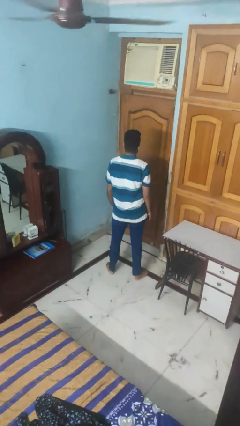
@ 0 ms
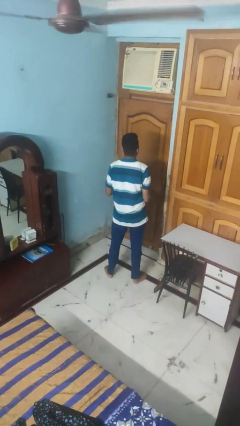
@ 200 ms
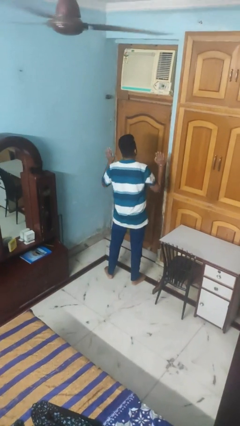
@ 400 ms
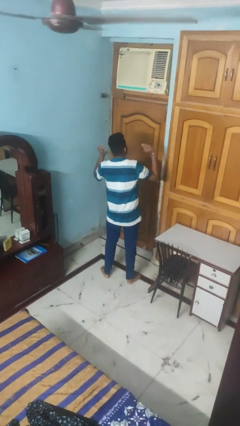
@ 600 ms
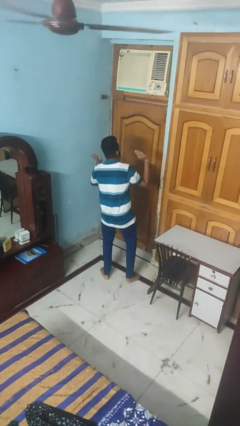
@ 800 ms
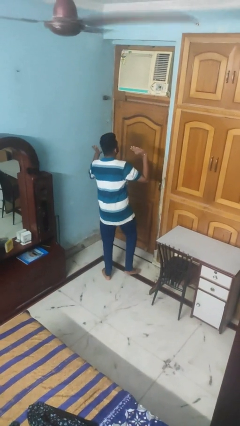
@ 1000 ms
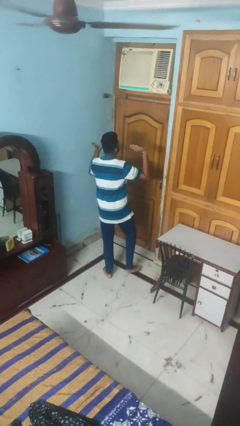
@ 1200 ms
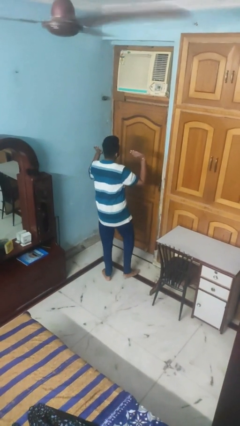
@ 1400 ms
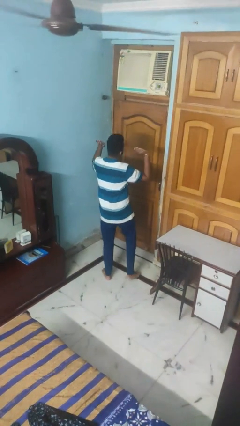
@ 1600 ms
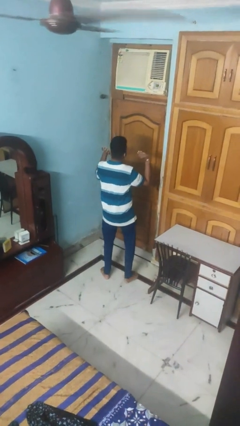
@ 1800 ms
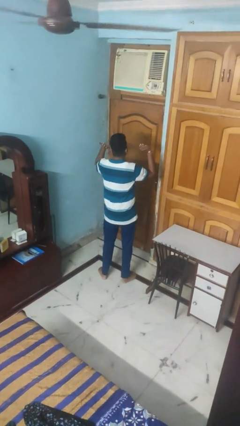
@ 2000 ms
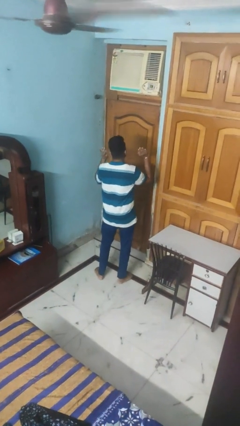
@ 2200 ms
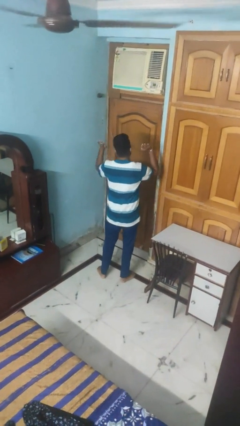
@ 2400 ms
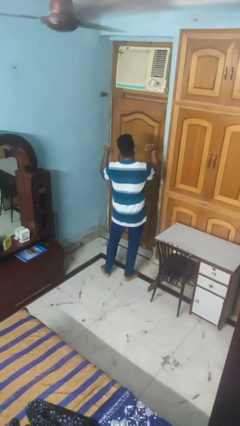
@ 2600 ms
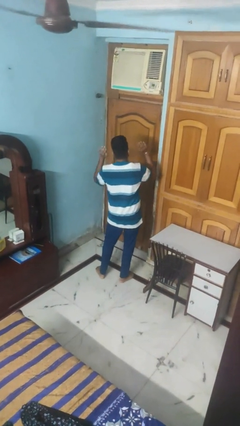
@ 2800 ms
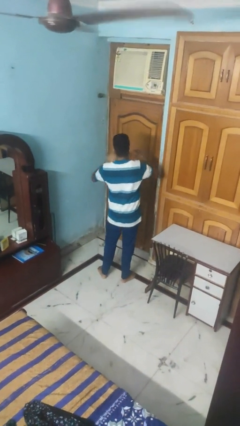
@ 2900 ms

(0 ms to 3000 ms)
person dances in place

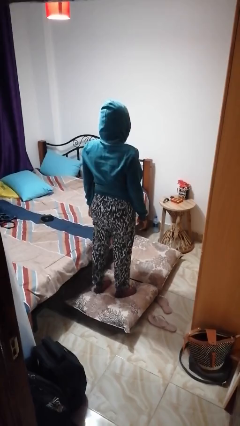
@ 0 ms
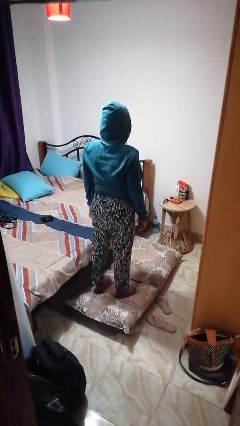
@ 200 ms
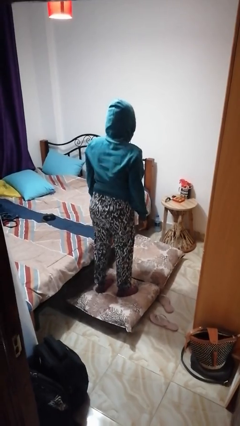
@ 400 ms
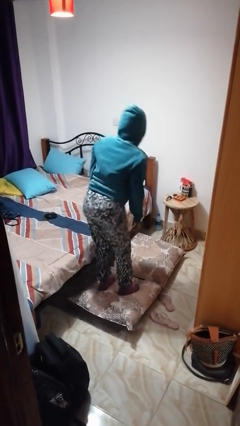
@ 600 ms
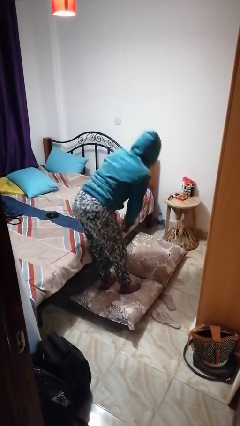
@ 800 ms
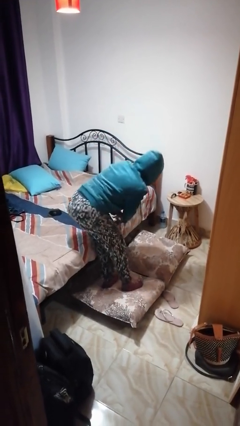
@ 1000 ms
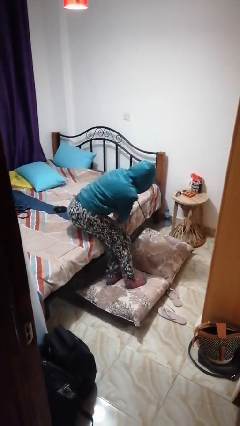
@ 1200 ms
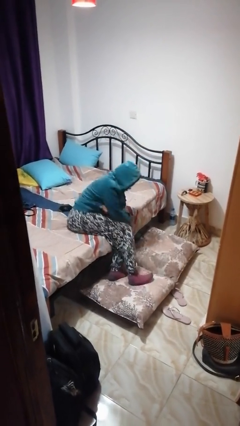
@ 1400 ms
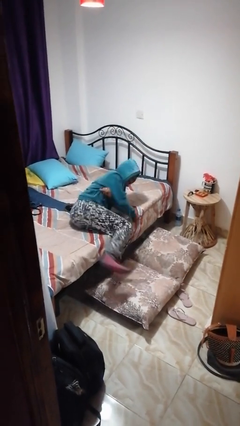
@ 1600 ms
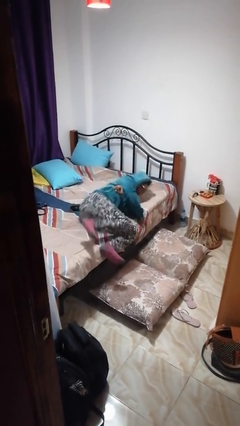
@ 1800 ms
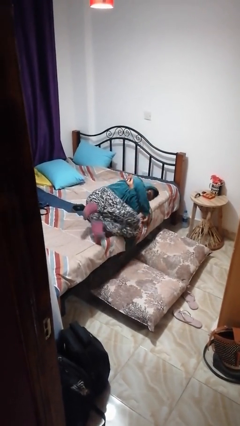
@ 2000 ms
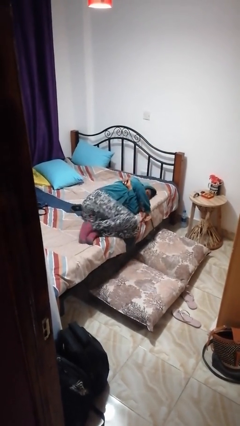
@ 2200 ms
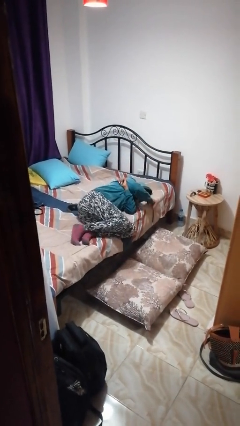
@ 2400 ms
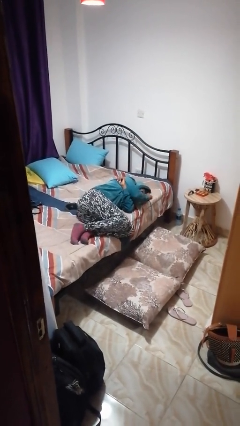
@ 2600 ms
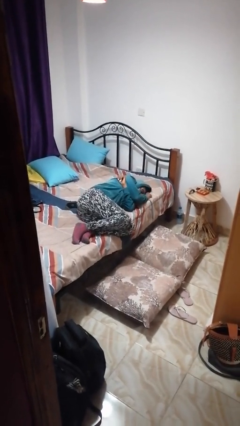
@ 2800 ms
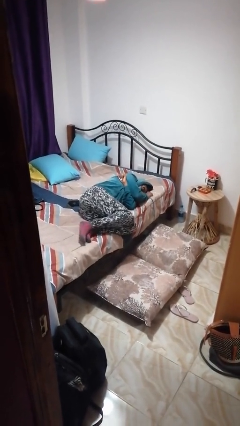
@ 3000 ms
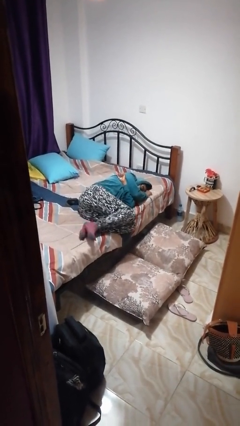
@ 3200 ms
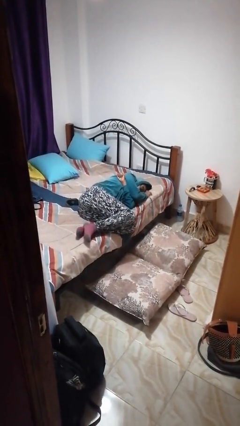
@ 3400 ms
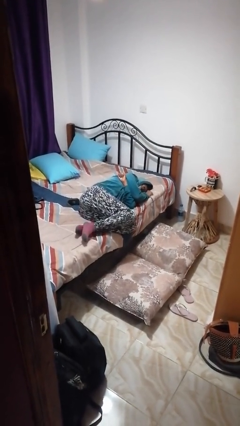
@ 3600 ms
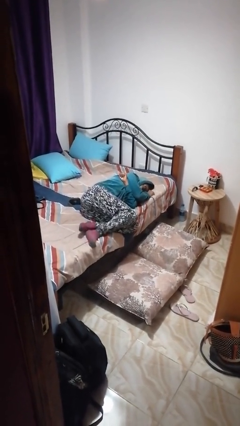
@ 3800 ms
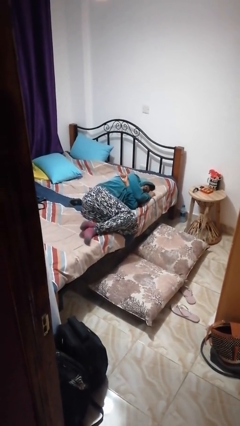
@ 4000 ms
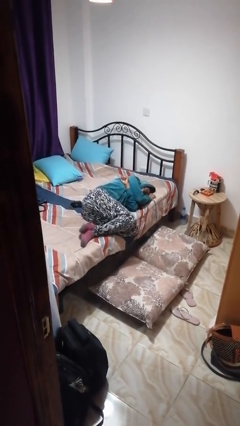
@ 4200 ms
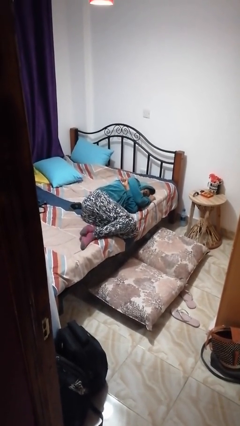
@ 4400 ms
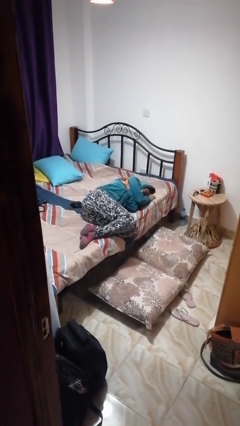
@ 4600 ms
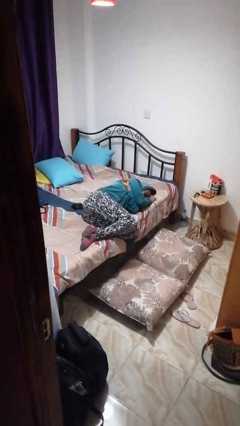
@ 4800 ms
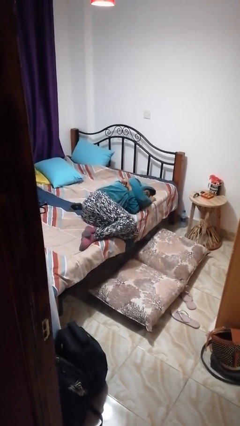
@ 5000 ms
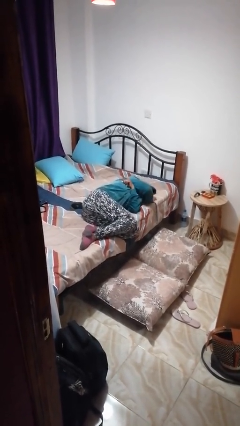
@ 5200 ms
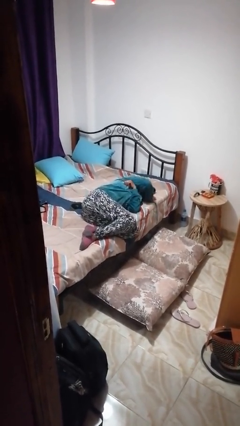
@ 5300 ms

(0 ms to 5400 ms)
person lies down on bed

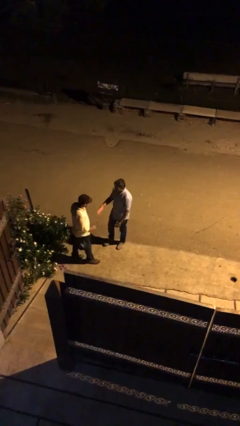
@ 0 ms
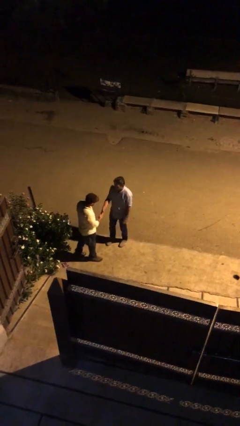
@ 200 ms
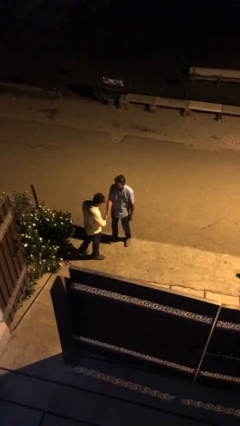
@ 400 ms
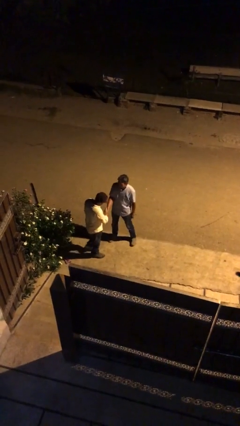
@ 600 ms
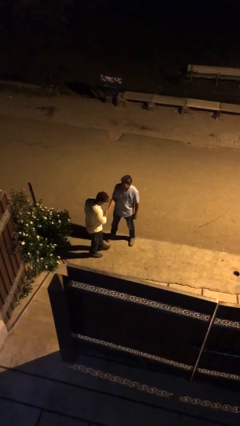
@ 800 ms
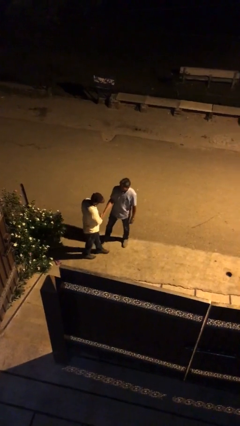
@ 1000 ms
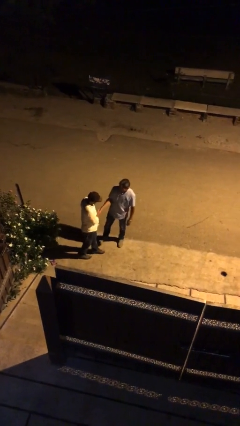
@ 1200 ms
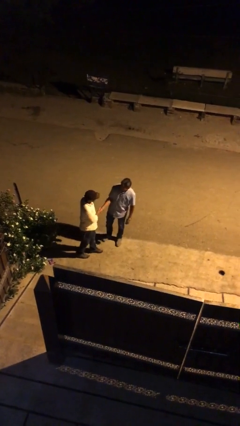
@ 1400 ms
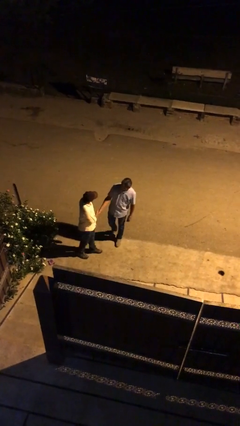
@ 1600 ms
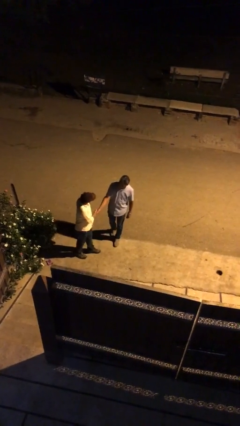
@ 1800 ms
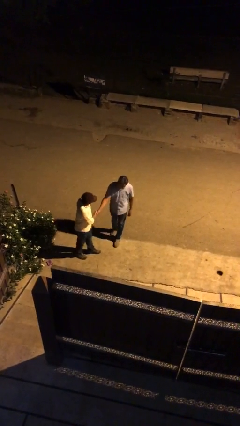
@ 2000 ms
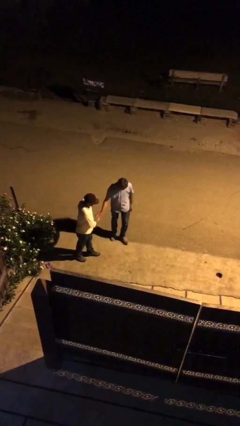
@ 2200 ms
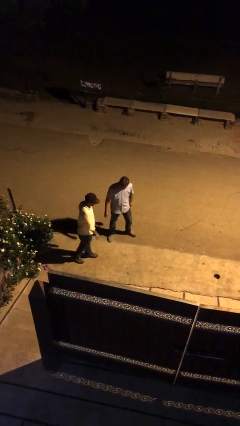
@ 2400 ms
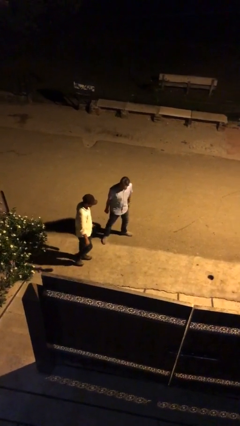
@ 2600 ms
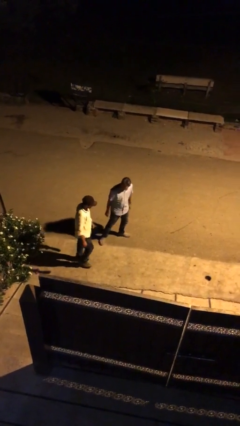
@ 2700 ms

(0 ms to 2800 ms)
person shakes hand

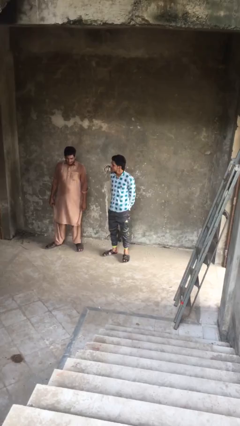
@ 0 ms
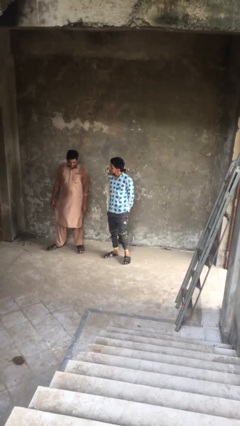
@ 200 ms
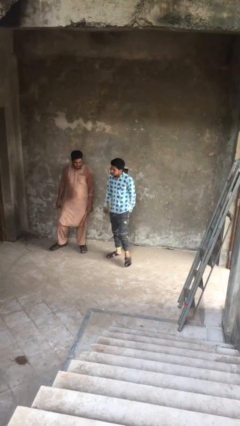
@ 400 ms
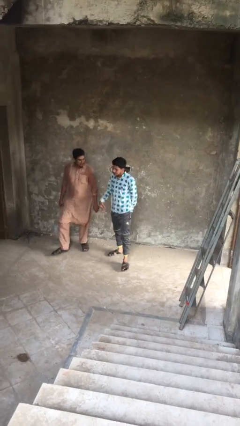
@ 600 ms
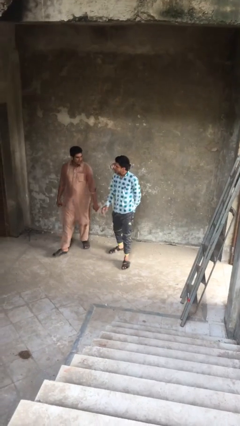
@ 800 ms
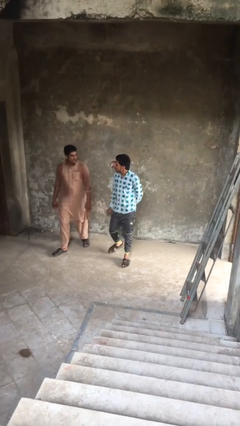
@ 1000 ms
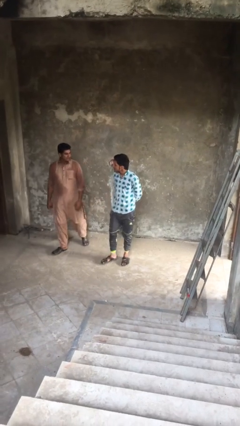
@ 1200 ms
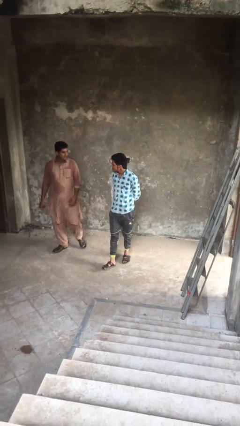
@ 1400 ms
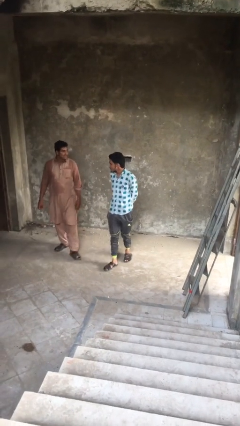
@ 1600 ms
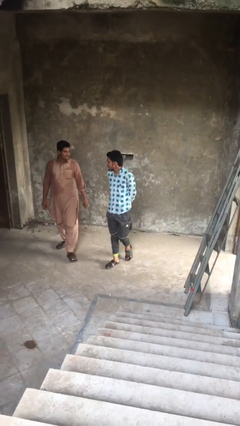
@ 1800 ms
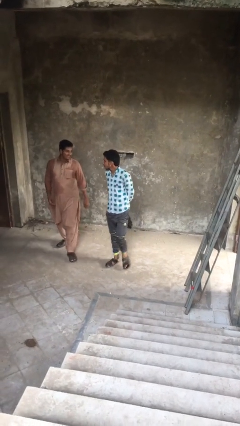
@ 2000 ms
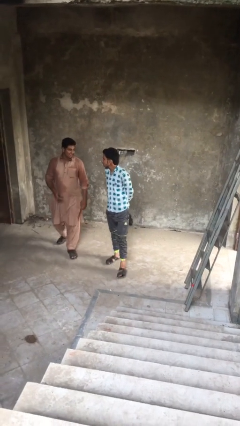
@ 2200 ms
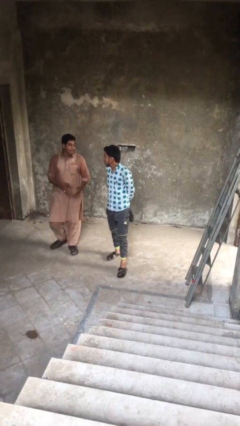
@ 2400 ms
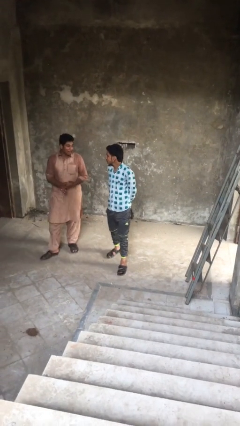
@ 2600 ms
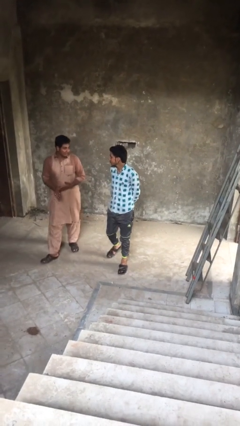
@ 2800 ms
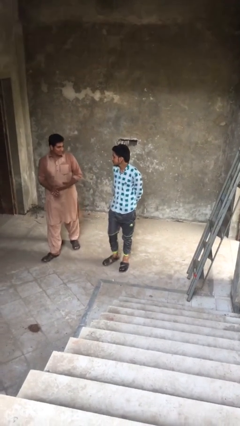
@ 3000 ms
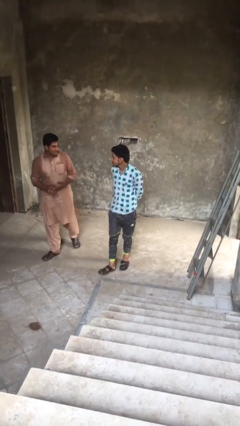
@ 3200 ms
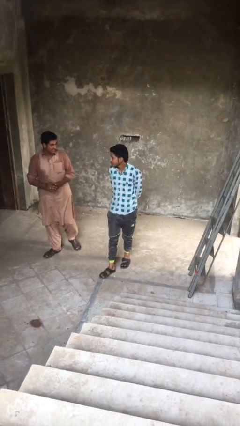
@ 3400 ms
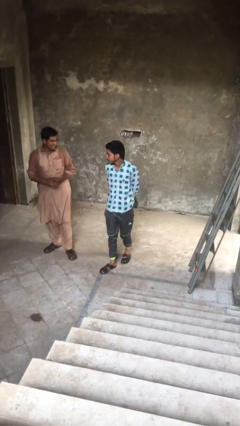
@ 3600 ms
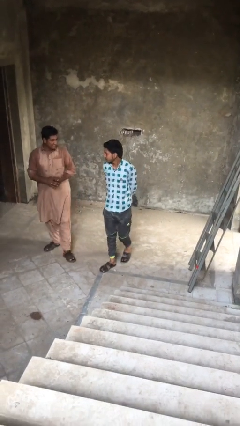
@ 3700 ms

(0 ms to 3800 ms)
person talks to person

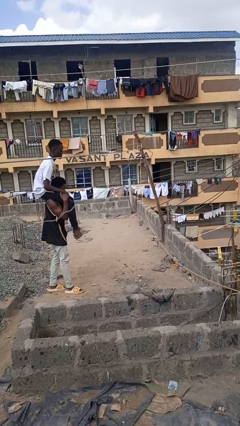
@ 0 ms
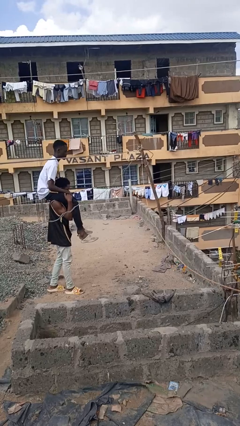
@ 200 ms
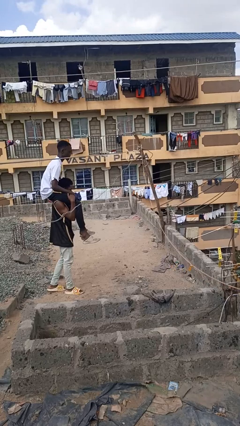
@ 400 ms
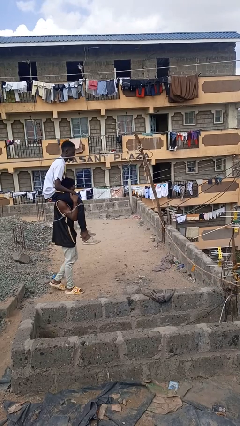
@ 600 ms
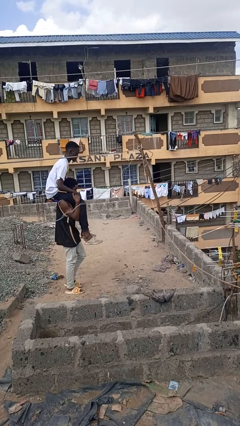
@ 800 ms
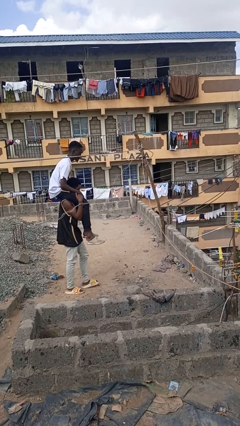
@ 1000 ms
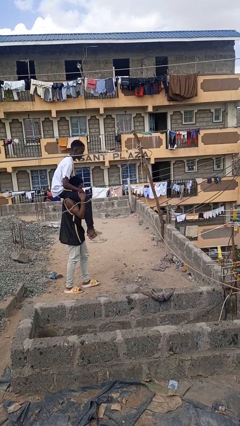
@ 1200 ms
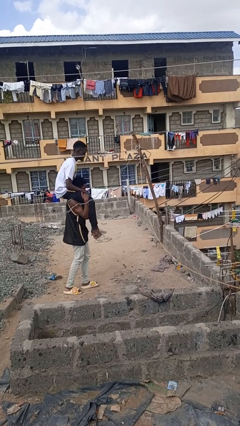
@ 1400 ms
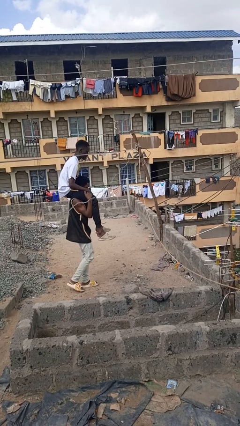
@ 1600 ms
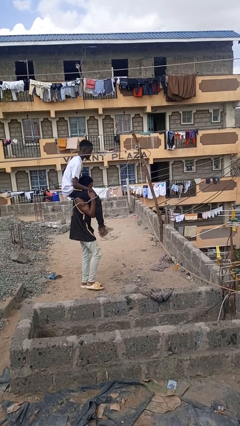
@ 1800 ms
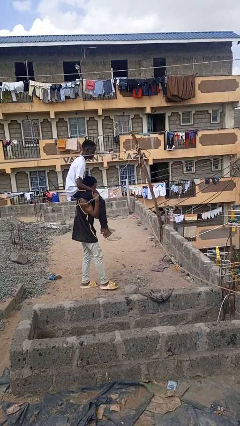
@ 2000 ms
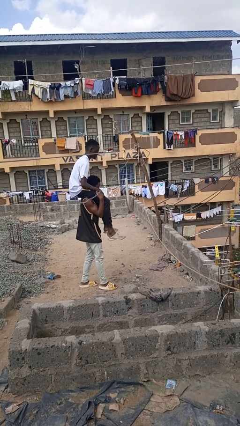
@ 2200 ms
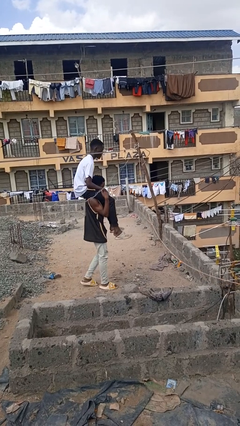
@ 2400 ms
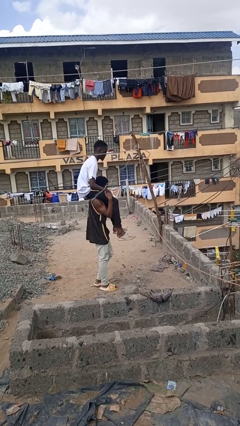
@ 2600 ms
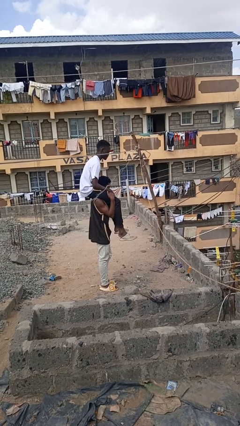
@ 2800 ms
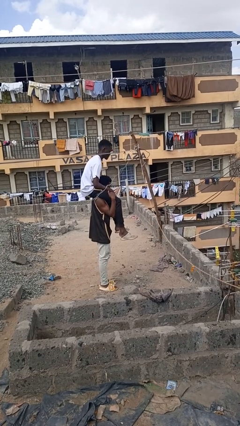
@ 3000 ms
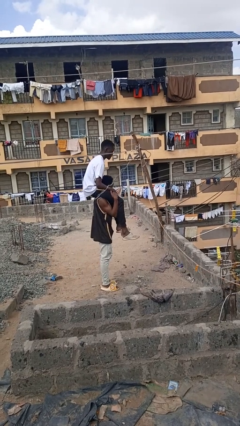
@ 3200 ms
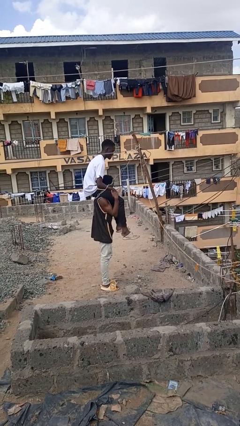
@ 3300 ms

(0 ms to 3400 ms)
person carries person on shoulders
